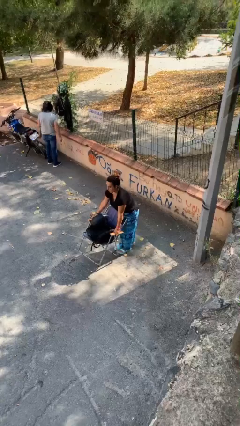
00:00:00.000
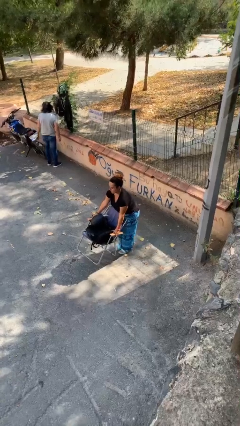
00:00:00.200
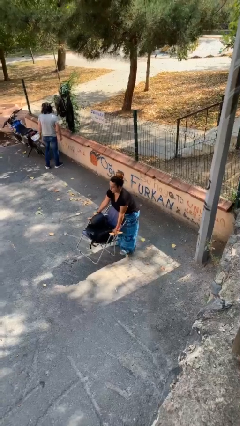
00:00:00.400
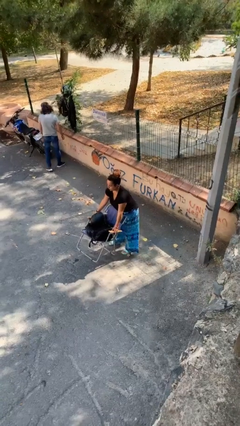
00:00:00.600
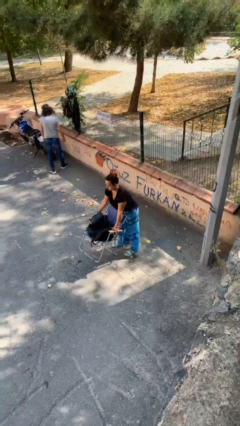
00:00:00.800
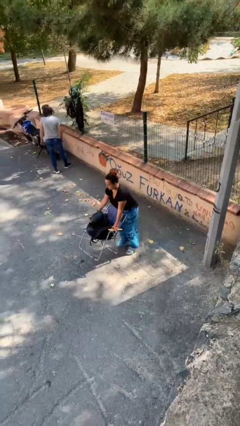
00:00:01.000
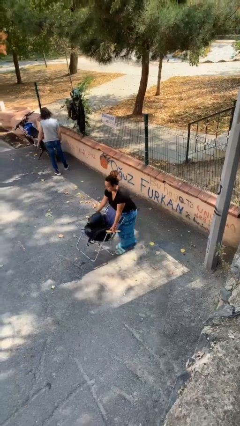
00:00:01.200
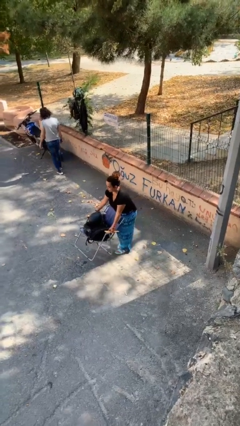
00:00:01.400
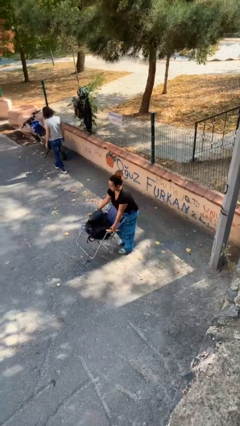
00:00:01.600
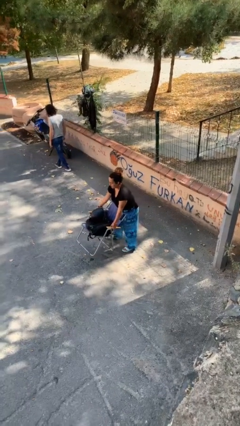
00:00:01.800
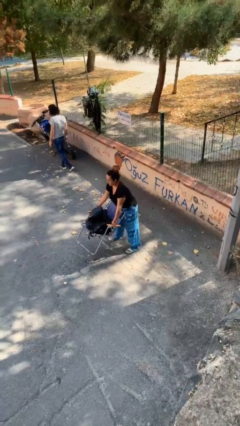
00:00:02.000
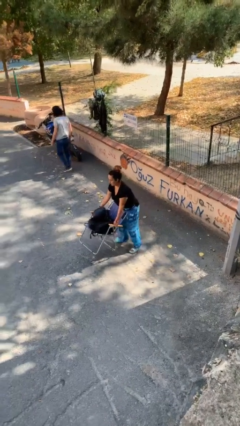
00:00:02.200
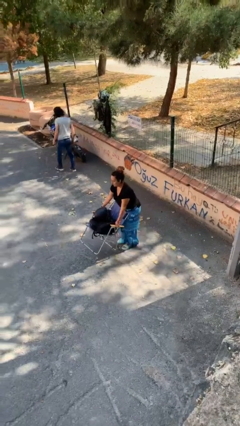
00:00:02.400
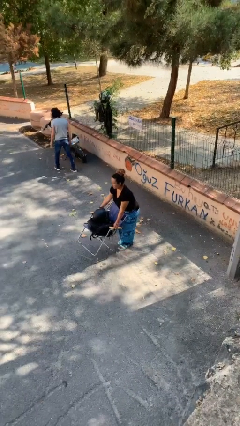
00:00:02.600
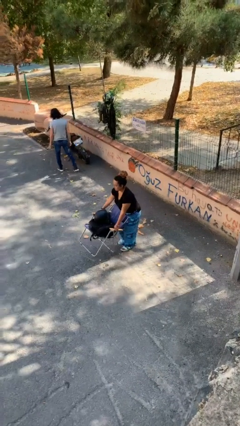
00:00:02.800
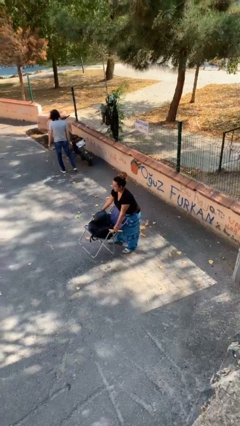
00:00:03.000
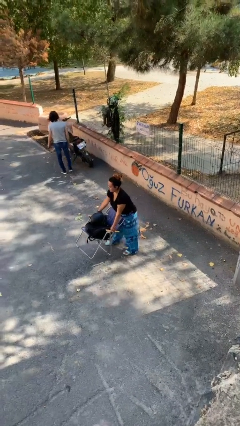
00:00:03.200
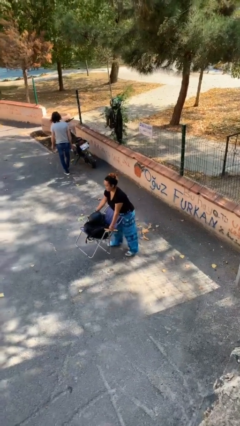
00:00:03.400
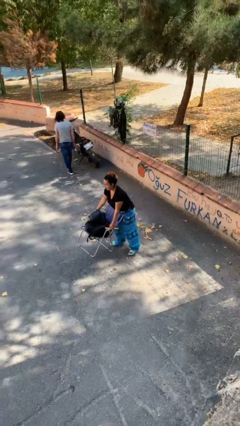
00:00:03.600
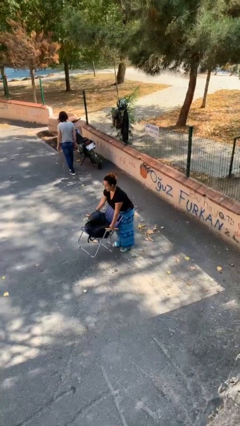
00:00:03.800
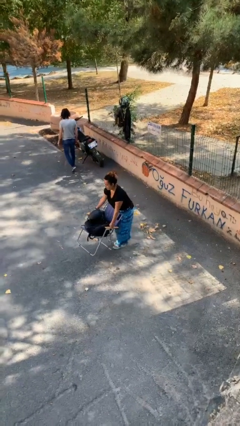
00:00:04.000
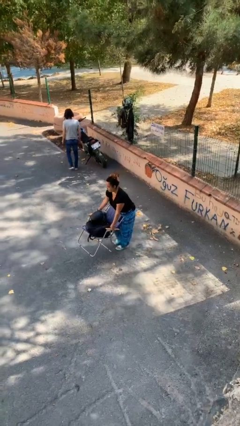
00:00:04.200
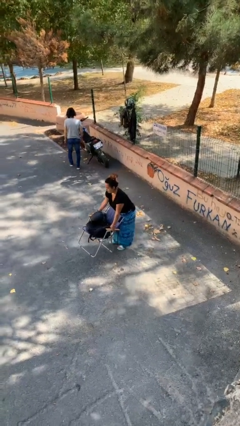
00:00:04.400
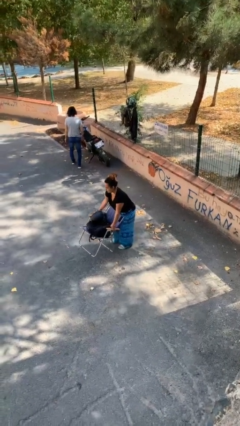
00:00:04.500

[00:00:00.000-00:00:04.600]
person carries heavy object

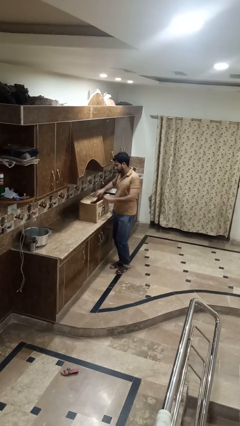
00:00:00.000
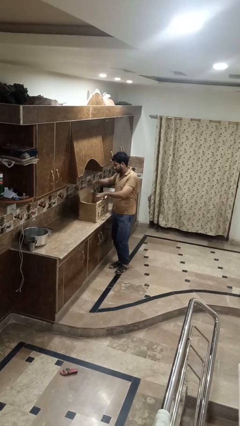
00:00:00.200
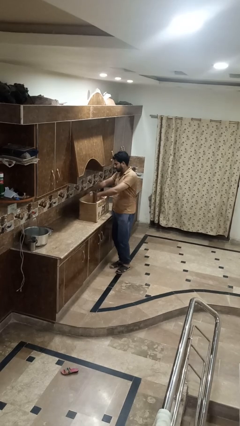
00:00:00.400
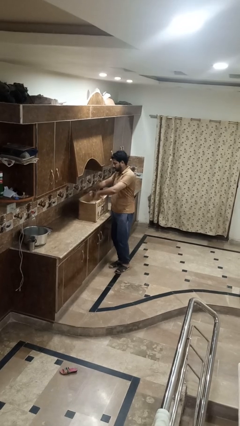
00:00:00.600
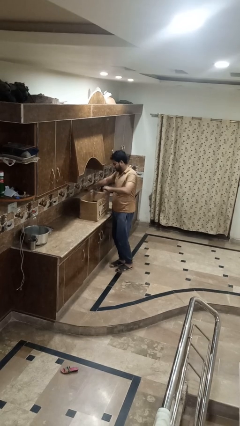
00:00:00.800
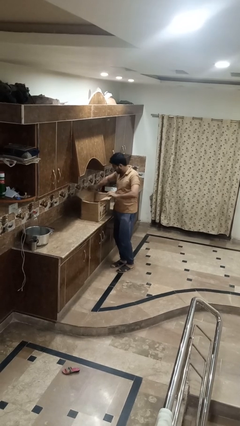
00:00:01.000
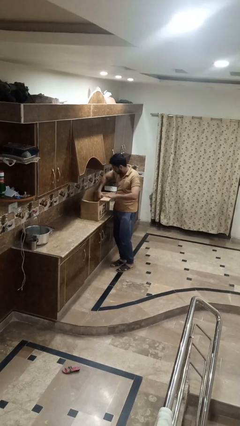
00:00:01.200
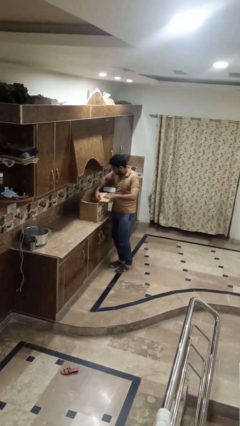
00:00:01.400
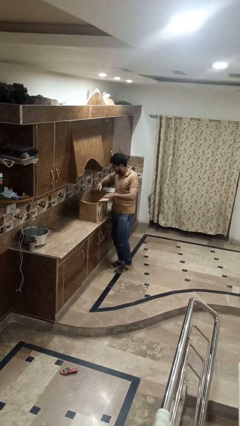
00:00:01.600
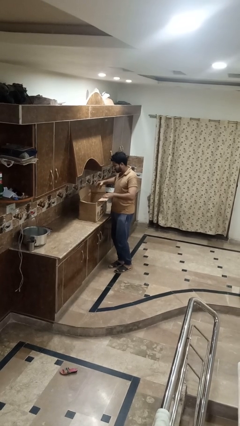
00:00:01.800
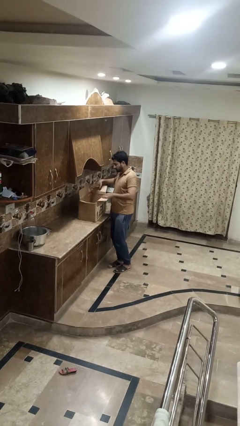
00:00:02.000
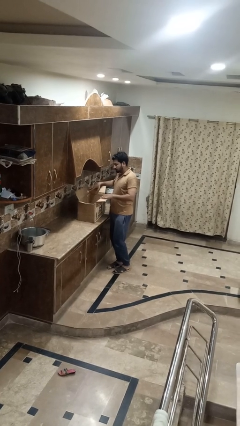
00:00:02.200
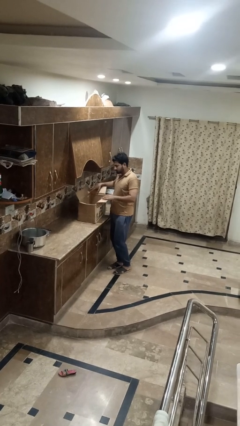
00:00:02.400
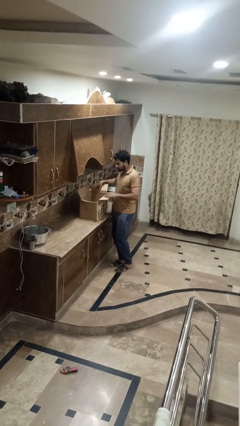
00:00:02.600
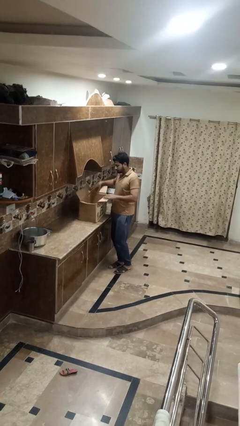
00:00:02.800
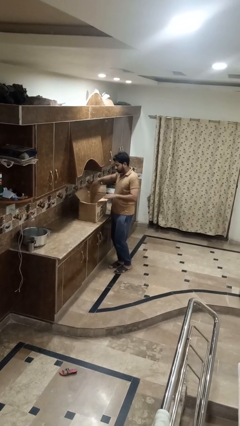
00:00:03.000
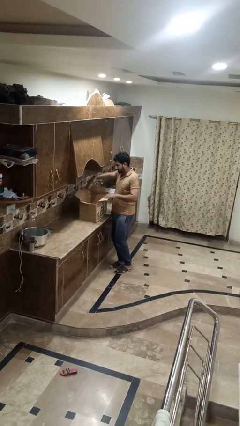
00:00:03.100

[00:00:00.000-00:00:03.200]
person opens box

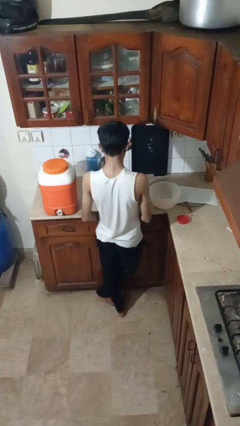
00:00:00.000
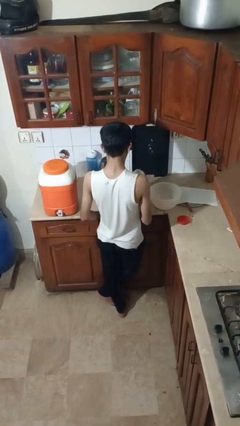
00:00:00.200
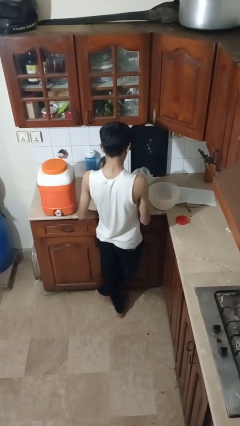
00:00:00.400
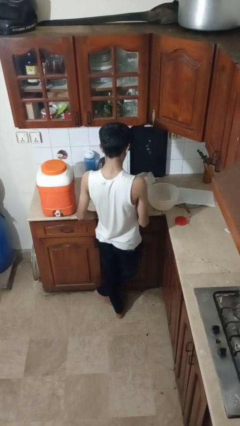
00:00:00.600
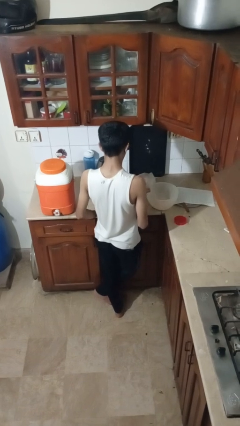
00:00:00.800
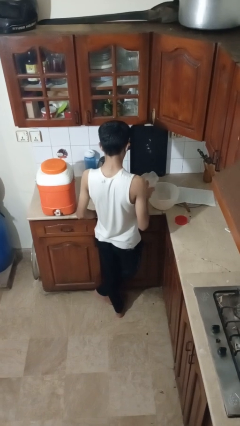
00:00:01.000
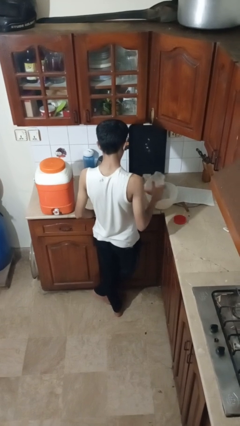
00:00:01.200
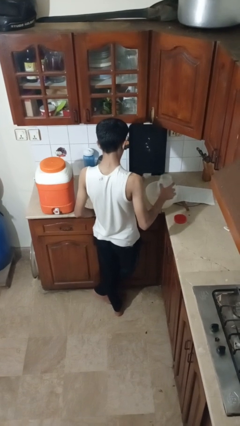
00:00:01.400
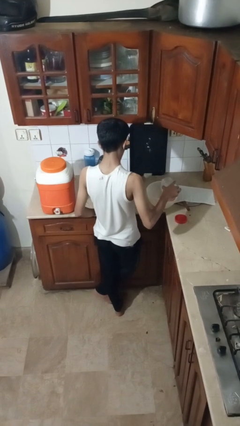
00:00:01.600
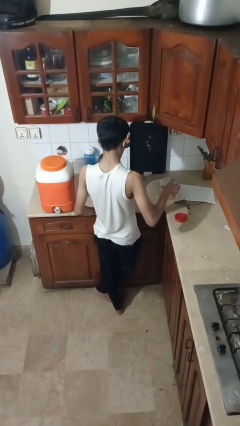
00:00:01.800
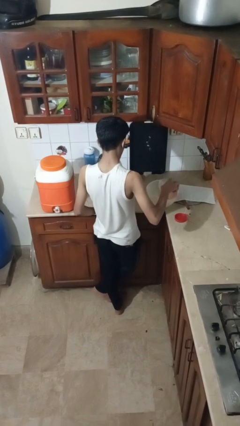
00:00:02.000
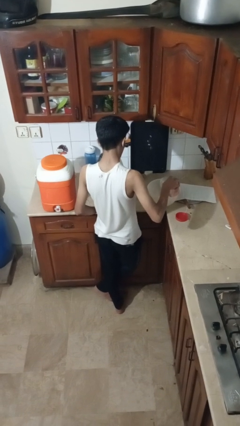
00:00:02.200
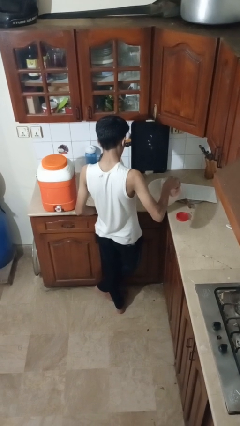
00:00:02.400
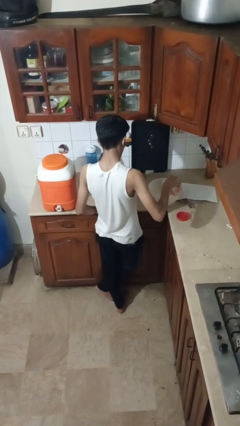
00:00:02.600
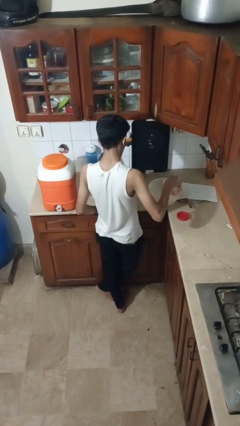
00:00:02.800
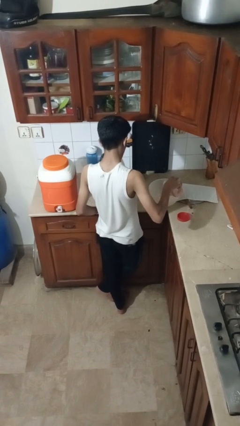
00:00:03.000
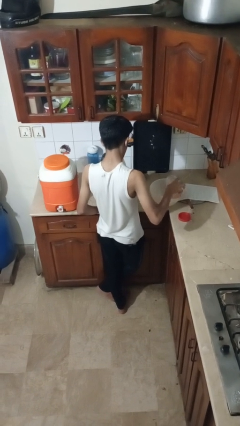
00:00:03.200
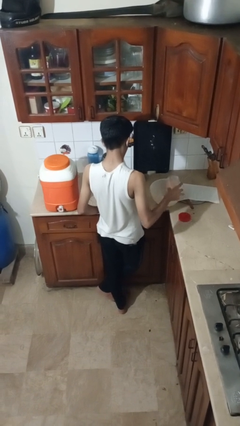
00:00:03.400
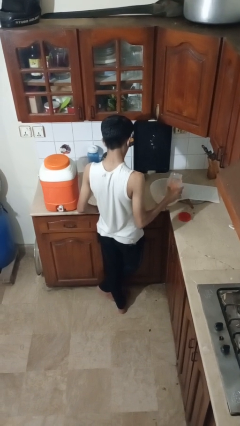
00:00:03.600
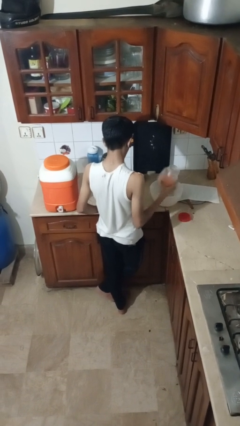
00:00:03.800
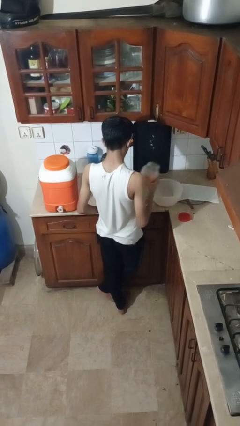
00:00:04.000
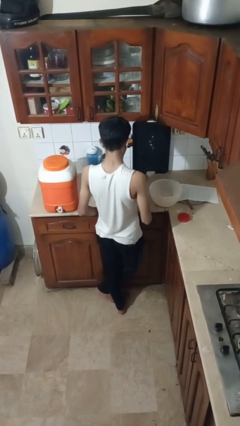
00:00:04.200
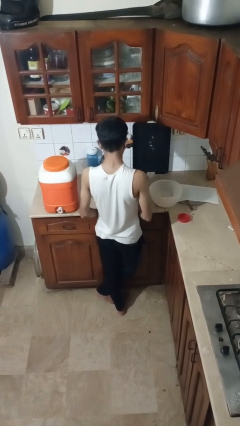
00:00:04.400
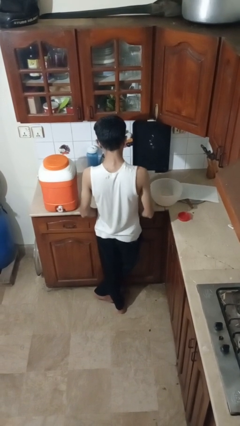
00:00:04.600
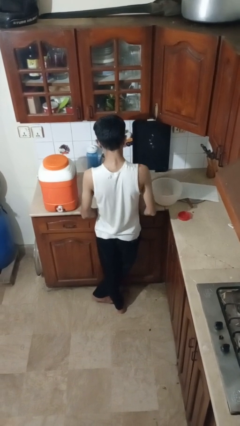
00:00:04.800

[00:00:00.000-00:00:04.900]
person pours into bowl

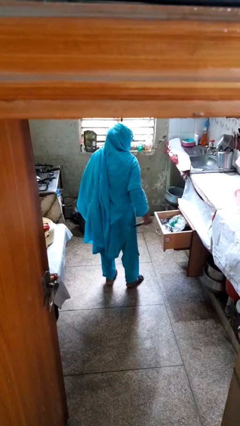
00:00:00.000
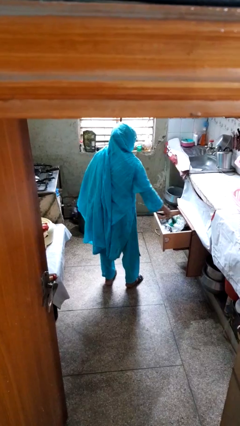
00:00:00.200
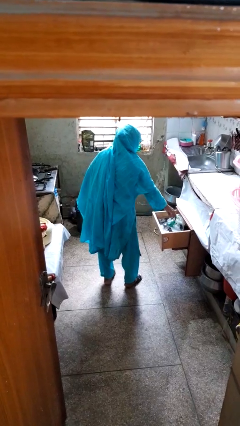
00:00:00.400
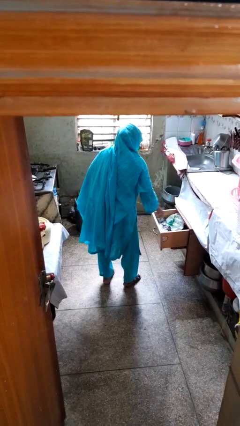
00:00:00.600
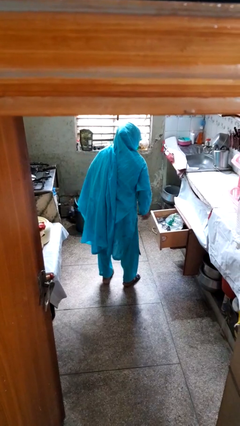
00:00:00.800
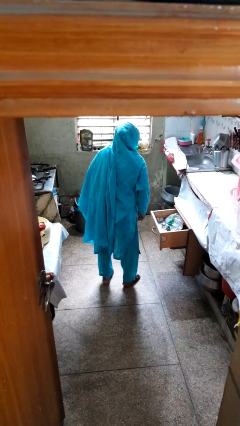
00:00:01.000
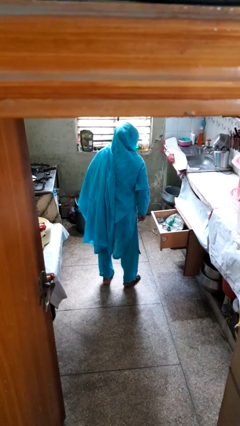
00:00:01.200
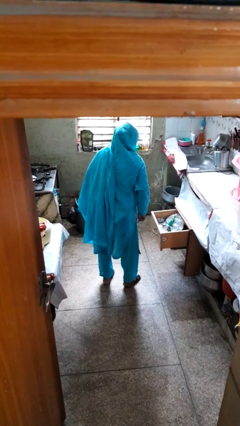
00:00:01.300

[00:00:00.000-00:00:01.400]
person puts object into kitchen drawer

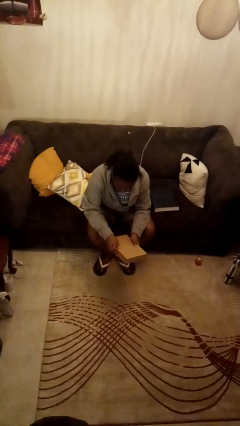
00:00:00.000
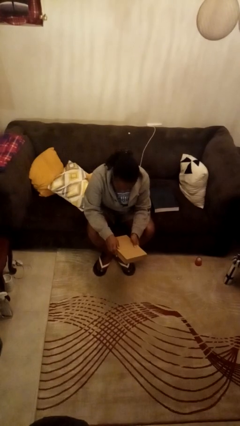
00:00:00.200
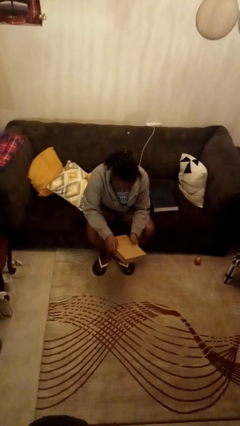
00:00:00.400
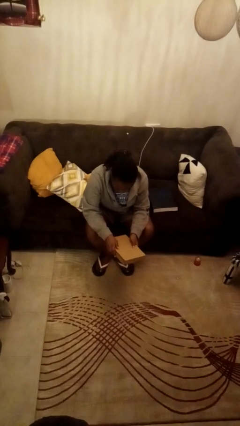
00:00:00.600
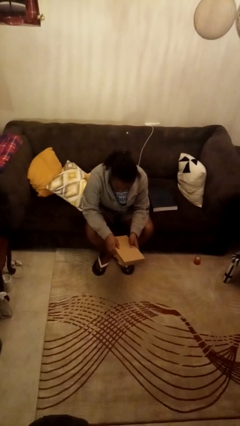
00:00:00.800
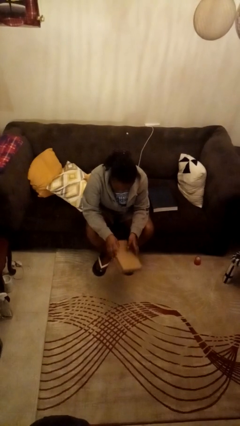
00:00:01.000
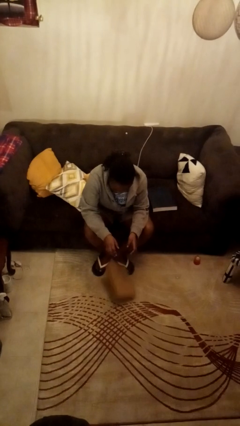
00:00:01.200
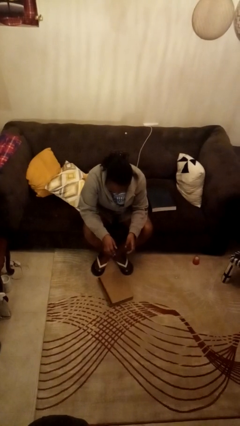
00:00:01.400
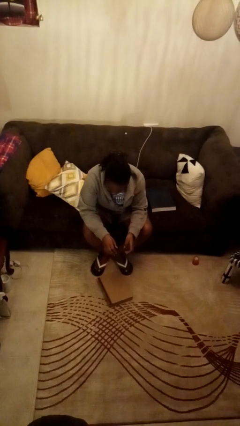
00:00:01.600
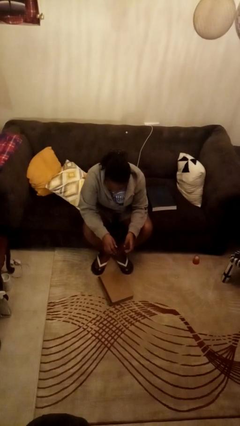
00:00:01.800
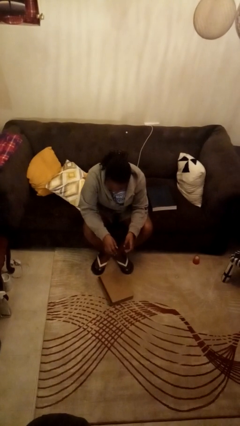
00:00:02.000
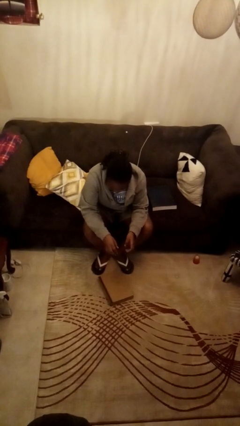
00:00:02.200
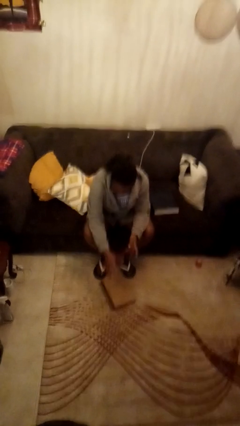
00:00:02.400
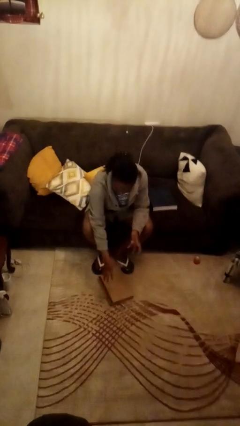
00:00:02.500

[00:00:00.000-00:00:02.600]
person drops object

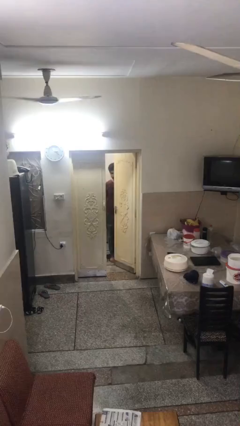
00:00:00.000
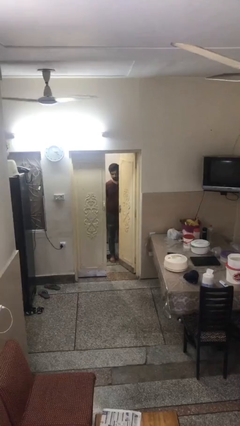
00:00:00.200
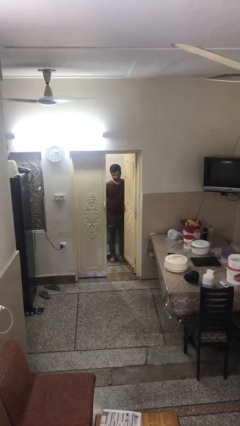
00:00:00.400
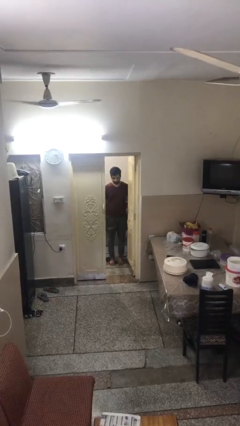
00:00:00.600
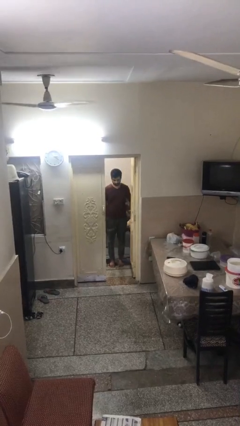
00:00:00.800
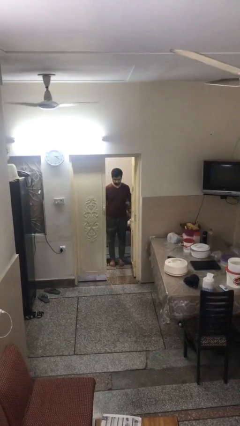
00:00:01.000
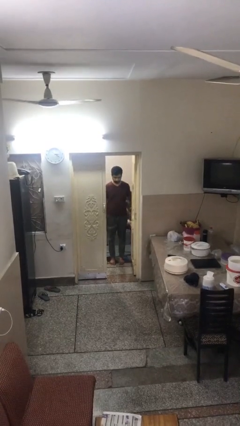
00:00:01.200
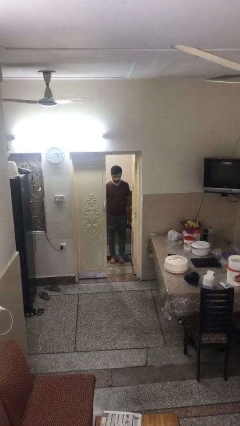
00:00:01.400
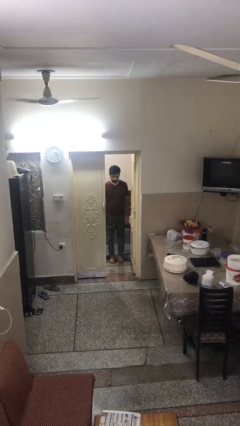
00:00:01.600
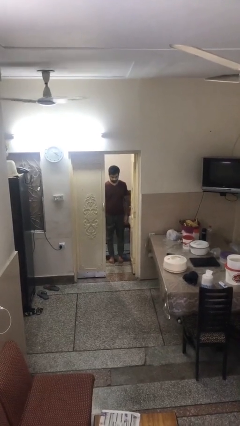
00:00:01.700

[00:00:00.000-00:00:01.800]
person opens facility door
